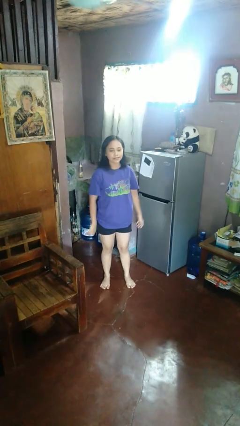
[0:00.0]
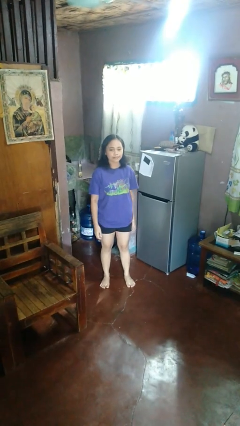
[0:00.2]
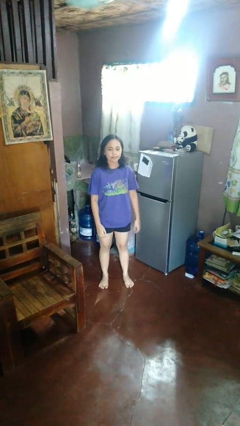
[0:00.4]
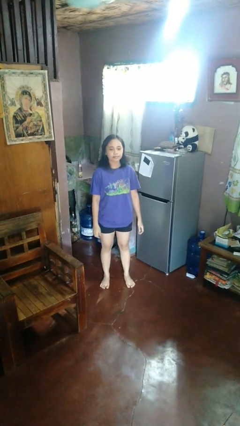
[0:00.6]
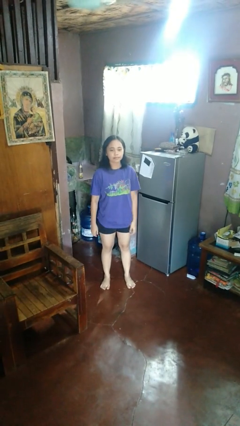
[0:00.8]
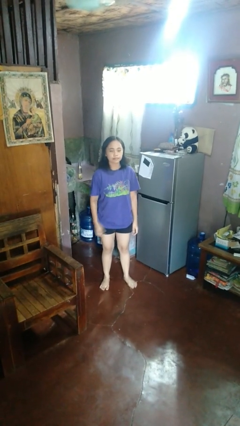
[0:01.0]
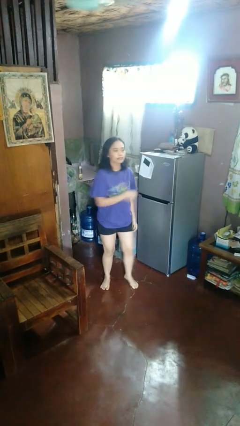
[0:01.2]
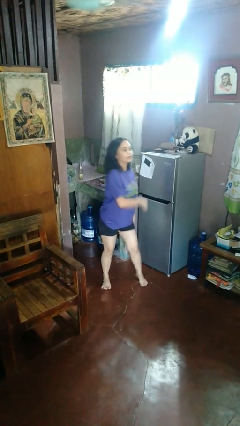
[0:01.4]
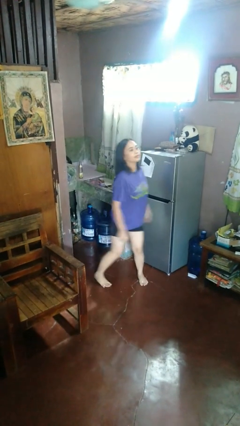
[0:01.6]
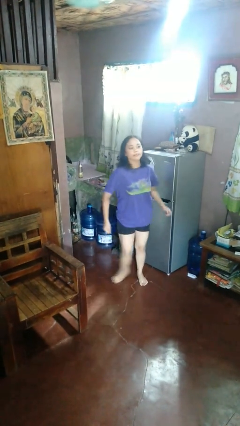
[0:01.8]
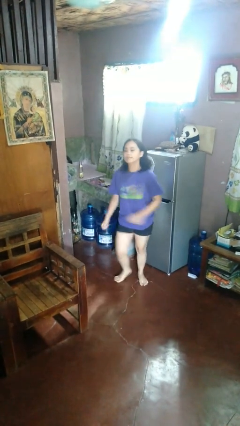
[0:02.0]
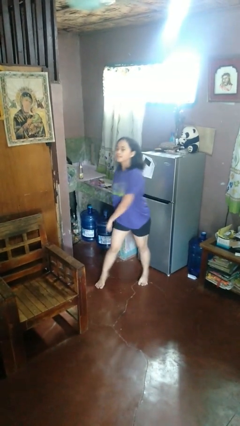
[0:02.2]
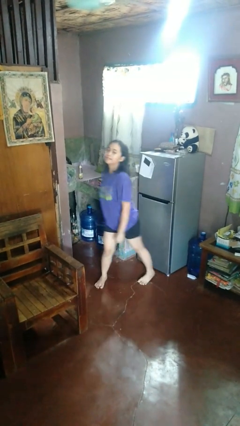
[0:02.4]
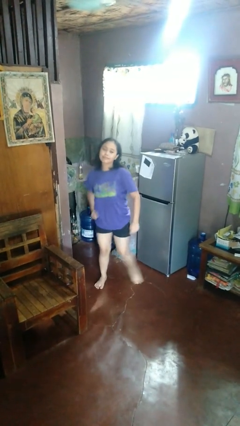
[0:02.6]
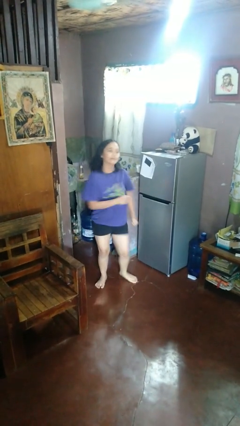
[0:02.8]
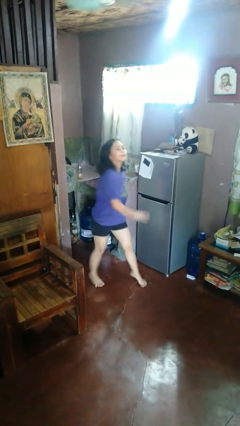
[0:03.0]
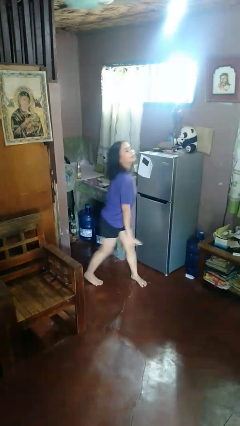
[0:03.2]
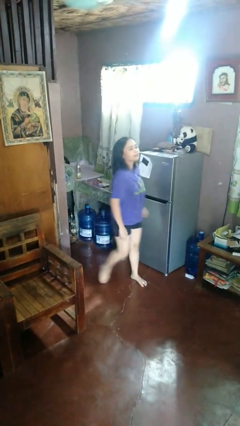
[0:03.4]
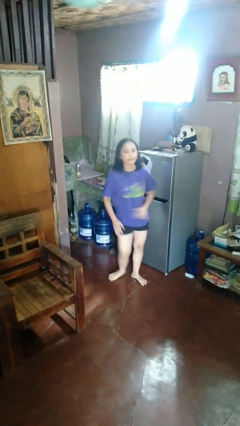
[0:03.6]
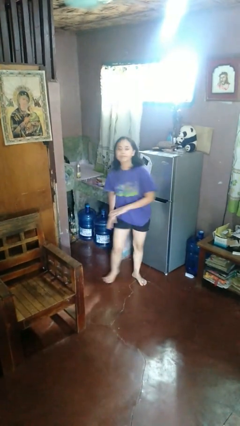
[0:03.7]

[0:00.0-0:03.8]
person dances in place

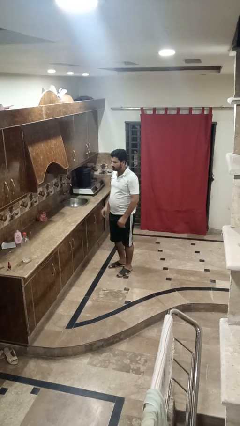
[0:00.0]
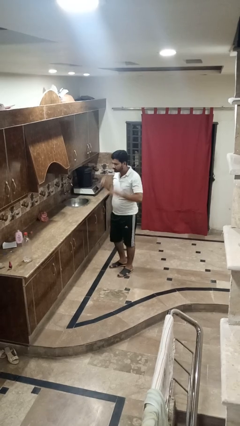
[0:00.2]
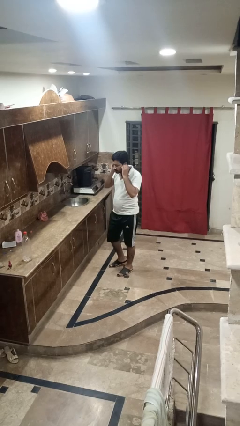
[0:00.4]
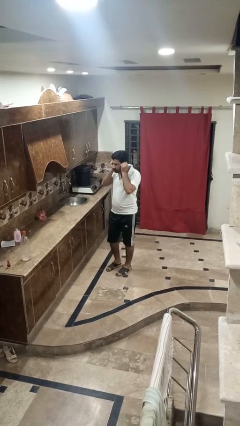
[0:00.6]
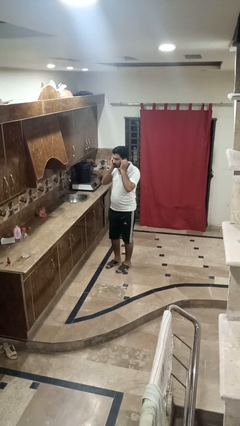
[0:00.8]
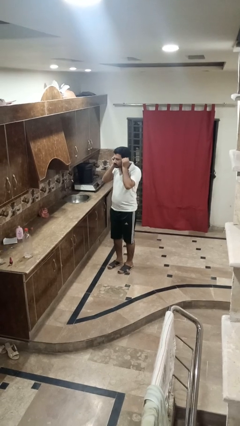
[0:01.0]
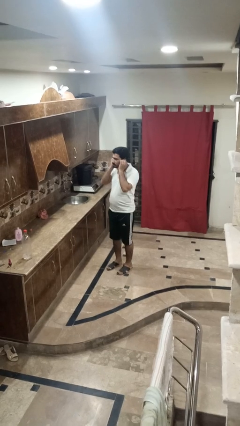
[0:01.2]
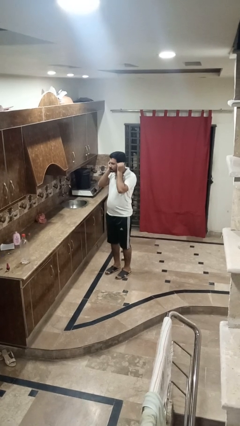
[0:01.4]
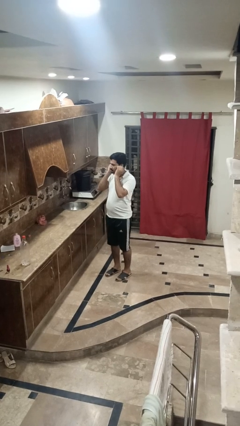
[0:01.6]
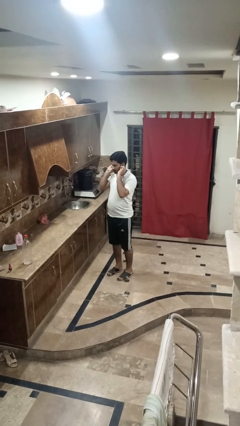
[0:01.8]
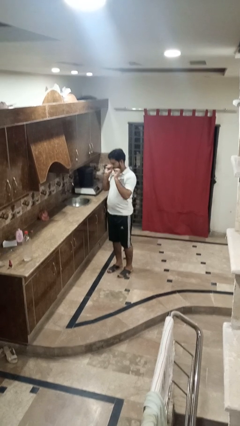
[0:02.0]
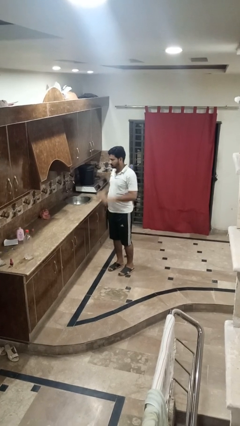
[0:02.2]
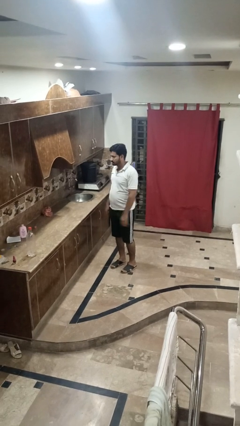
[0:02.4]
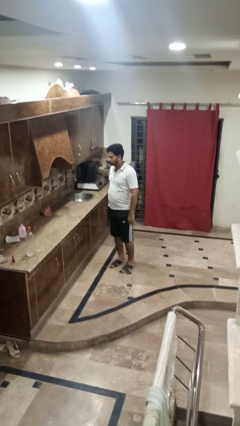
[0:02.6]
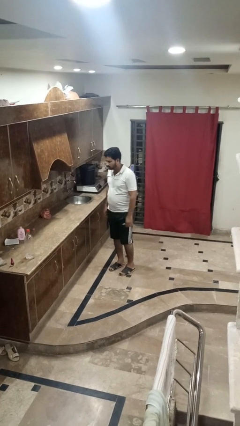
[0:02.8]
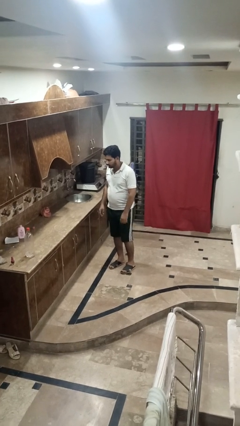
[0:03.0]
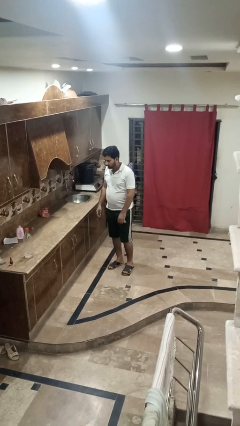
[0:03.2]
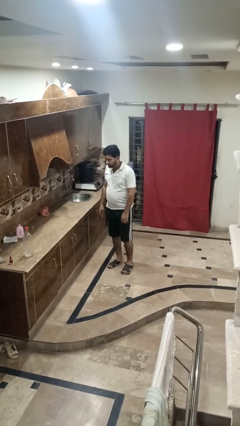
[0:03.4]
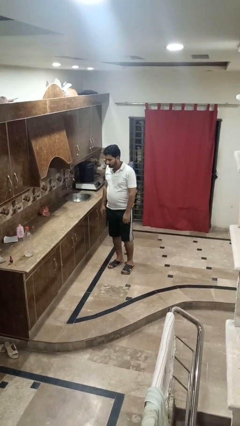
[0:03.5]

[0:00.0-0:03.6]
person touches earlobe

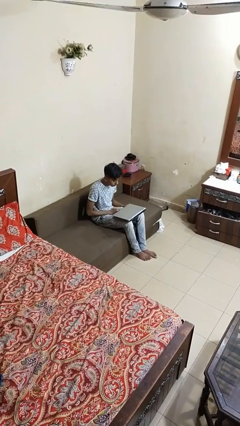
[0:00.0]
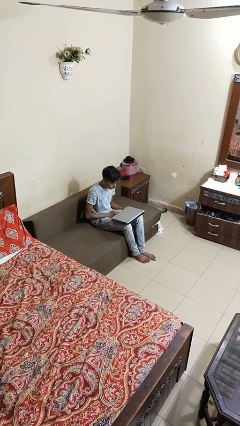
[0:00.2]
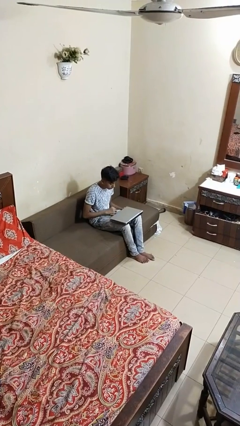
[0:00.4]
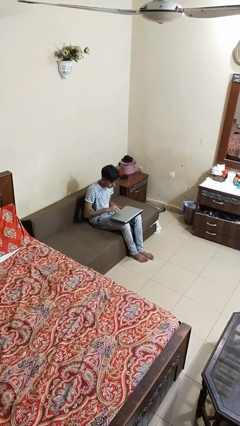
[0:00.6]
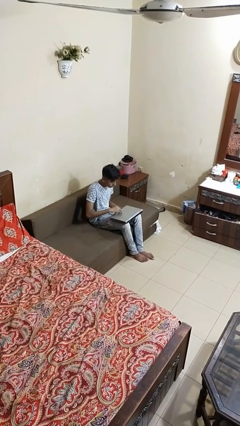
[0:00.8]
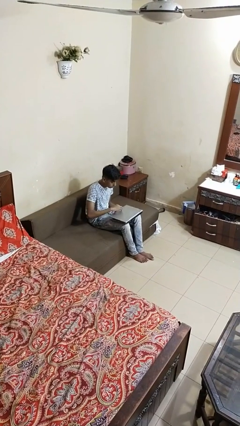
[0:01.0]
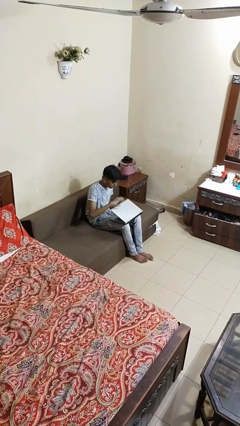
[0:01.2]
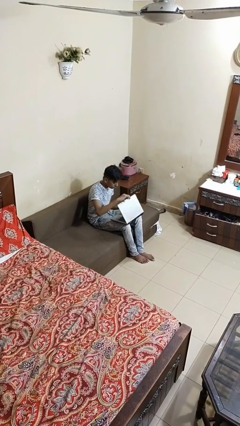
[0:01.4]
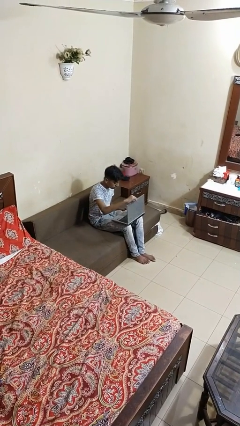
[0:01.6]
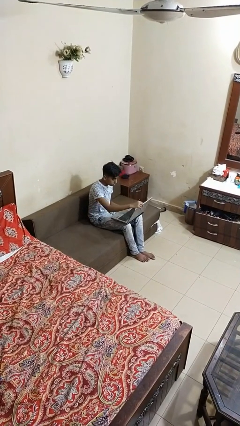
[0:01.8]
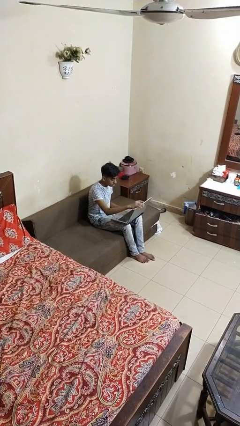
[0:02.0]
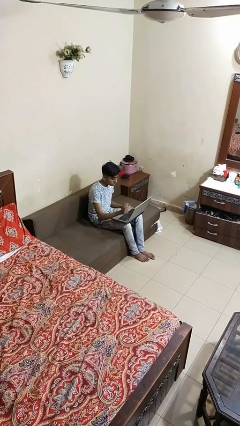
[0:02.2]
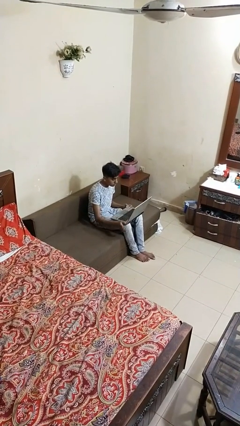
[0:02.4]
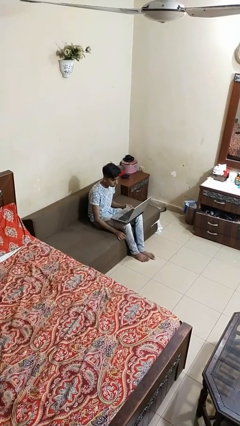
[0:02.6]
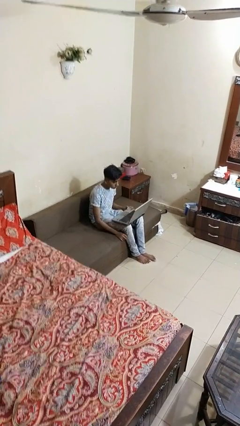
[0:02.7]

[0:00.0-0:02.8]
person opens laptop

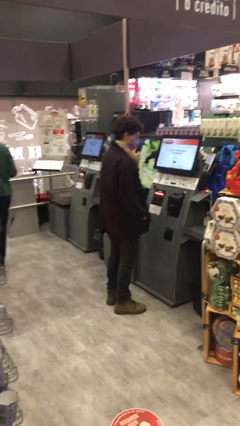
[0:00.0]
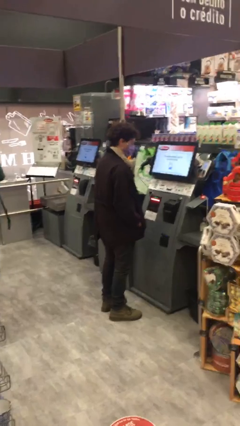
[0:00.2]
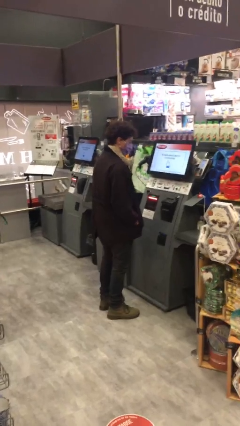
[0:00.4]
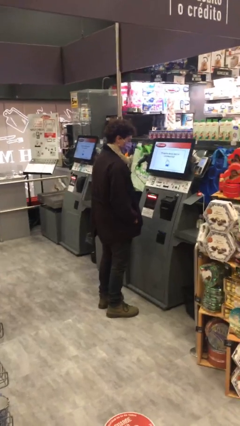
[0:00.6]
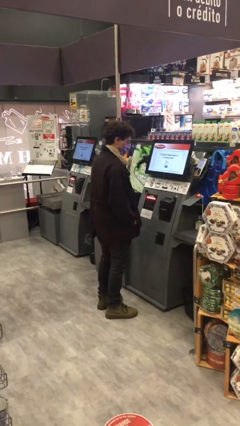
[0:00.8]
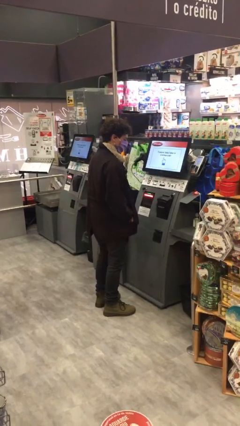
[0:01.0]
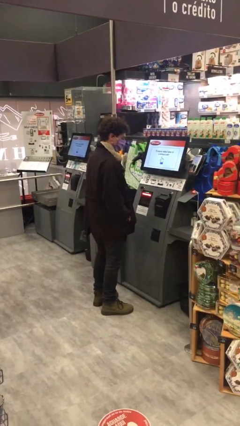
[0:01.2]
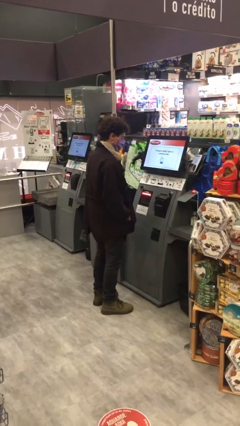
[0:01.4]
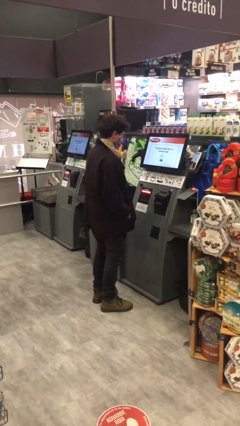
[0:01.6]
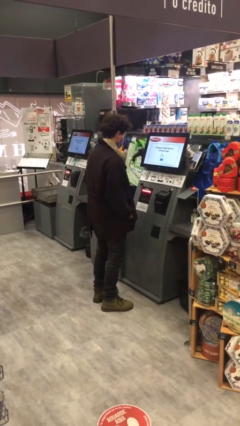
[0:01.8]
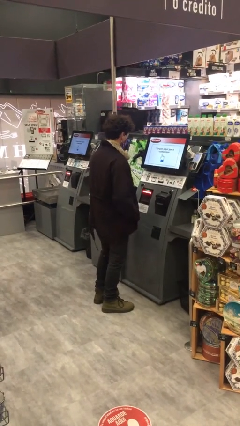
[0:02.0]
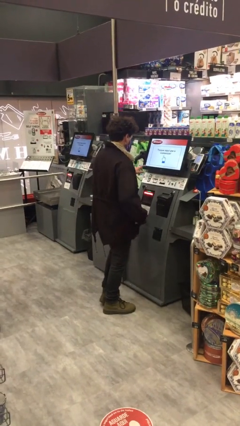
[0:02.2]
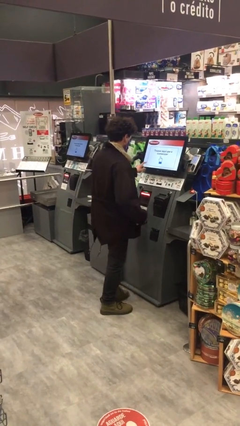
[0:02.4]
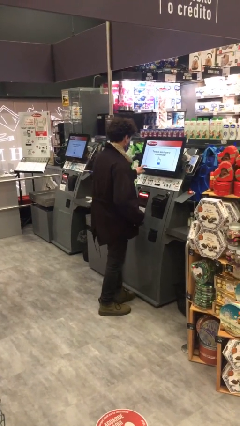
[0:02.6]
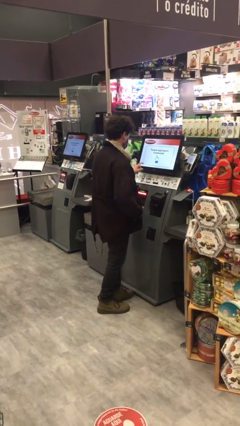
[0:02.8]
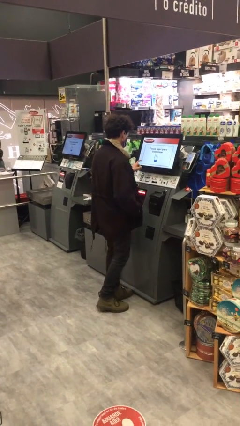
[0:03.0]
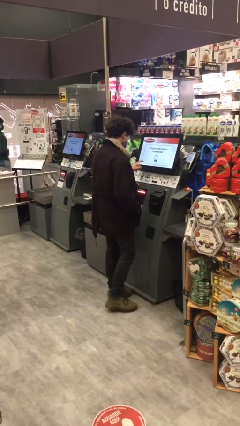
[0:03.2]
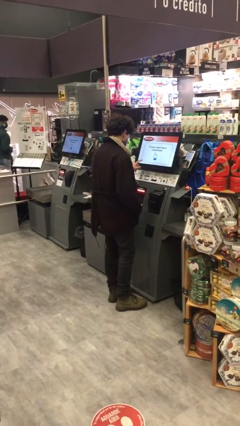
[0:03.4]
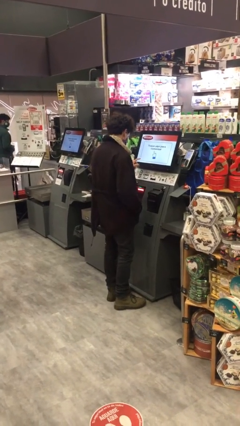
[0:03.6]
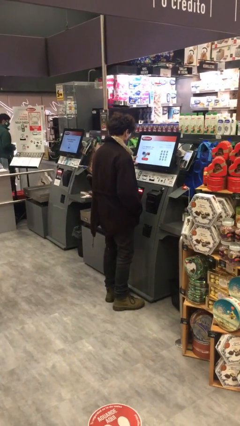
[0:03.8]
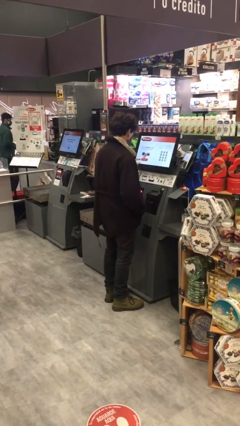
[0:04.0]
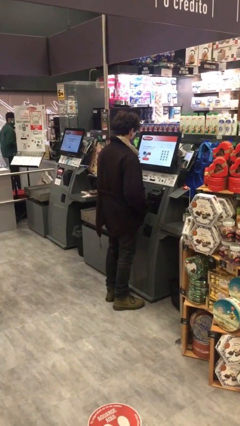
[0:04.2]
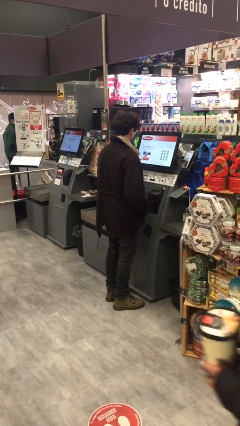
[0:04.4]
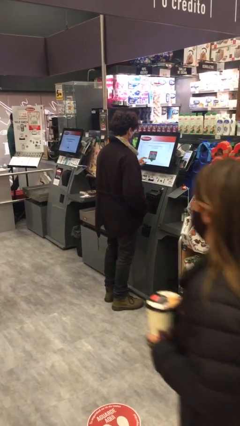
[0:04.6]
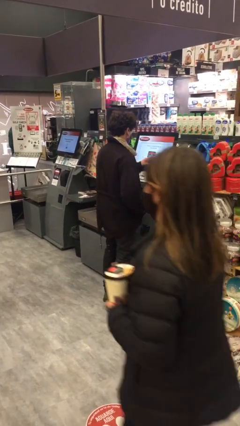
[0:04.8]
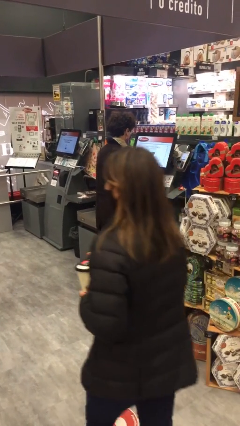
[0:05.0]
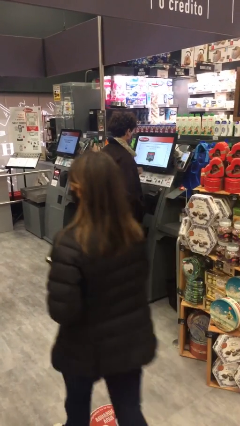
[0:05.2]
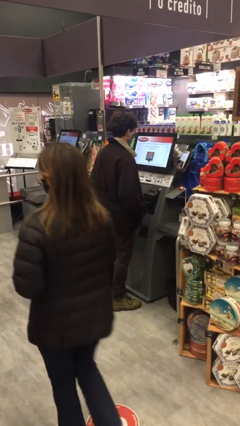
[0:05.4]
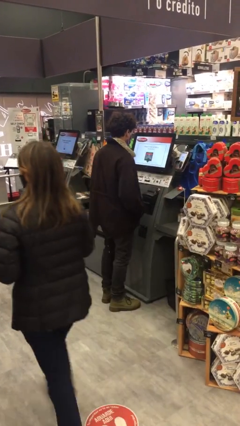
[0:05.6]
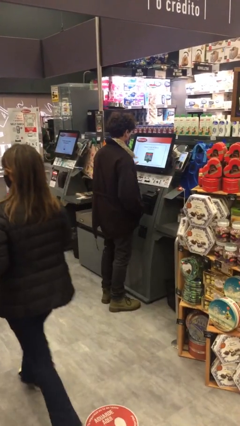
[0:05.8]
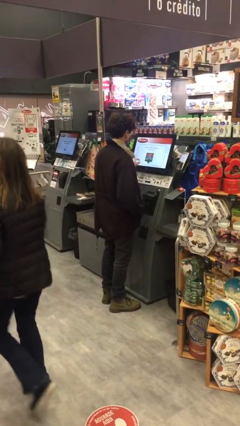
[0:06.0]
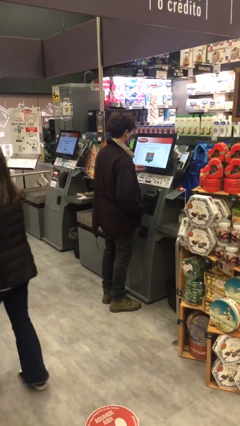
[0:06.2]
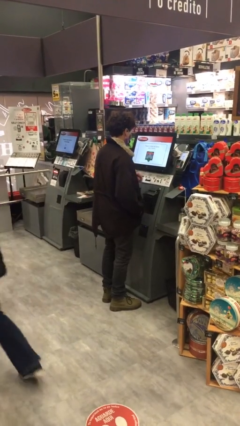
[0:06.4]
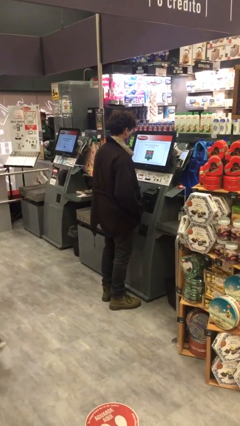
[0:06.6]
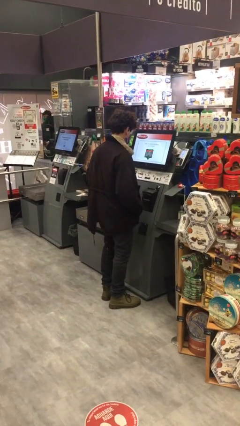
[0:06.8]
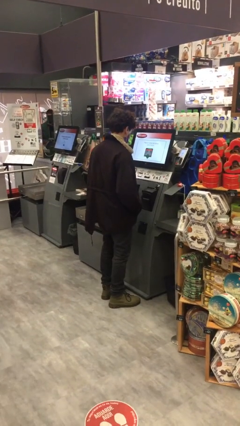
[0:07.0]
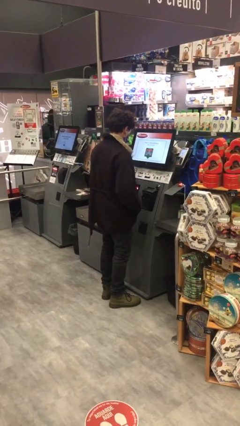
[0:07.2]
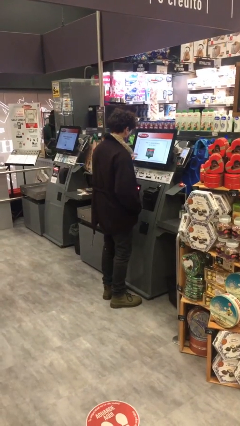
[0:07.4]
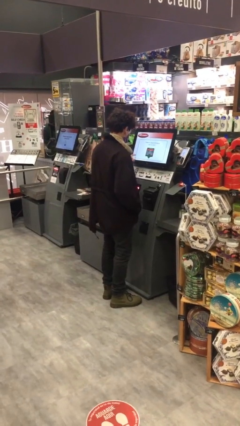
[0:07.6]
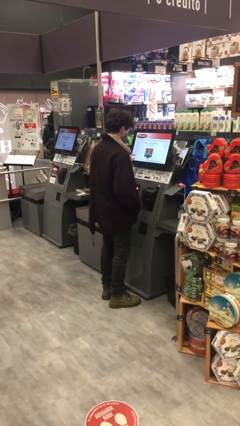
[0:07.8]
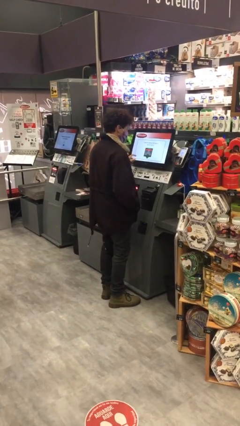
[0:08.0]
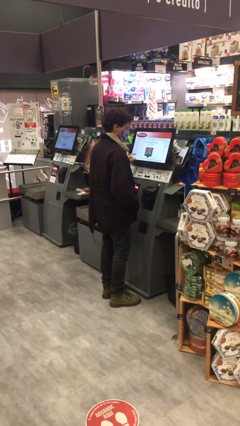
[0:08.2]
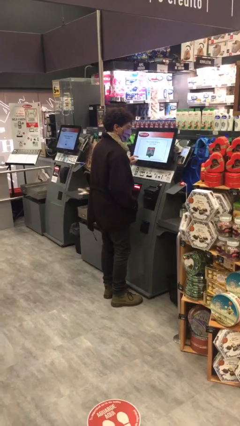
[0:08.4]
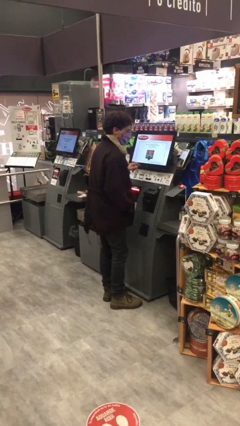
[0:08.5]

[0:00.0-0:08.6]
person purchases from machine
